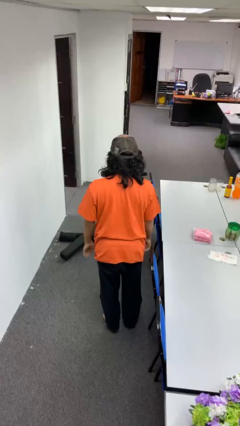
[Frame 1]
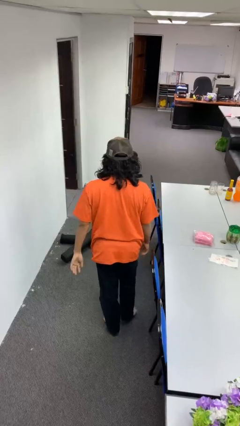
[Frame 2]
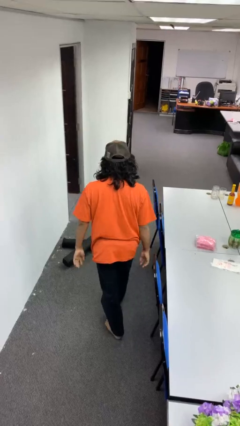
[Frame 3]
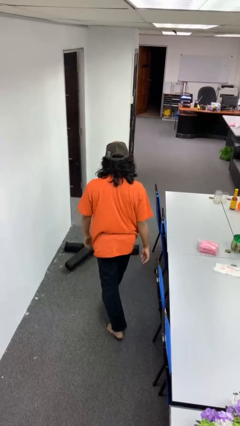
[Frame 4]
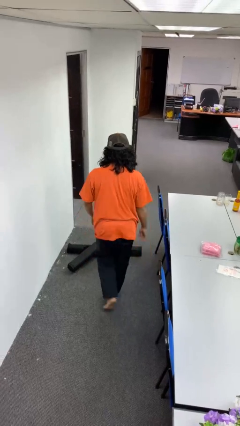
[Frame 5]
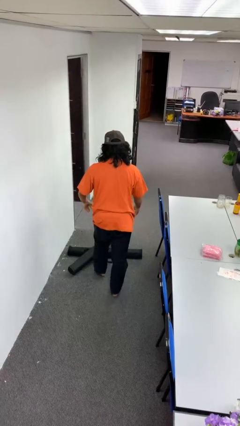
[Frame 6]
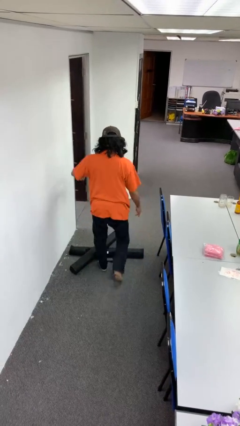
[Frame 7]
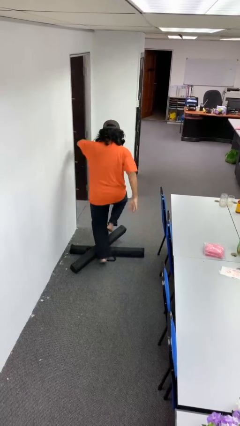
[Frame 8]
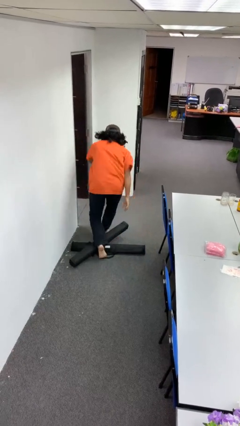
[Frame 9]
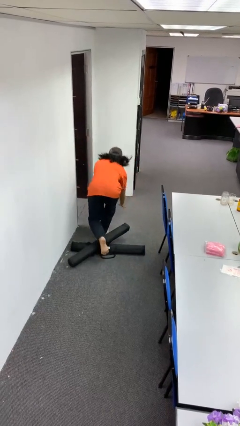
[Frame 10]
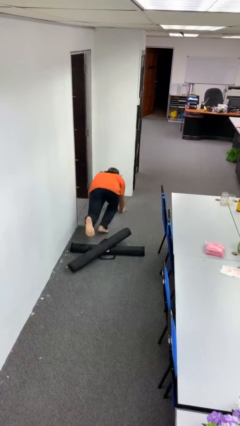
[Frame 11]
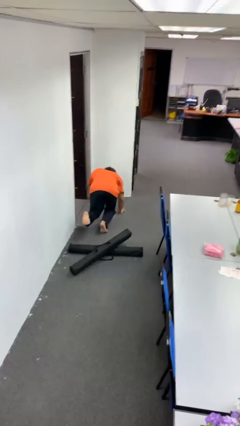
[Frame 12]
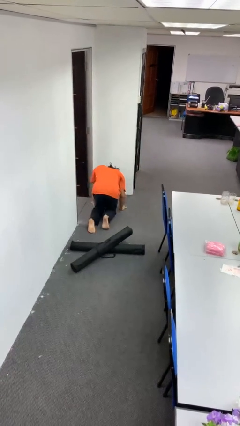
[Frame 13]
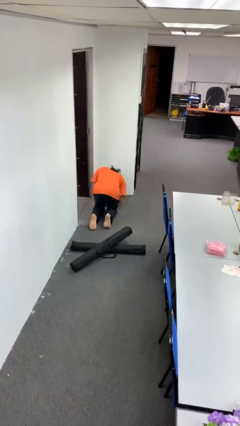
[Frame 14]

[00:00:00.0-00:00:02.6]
person trips on object on floor

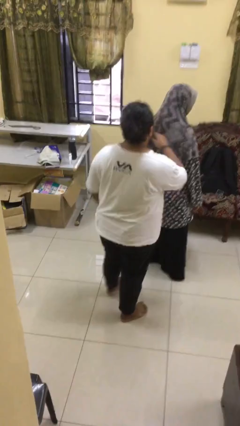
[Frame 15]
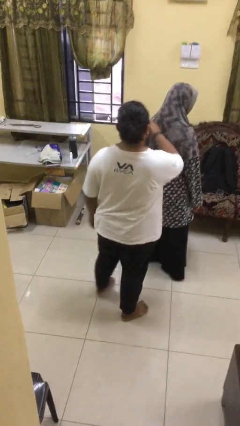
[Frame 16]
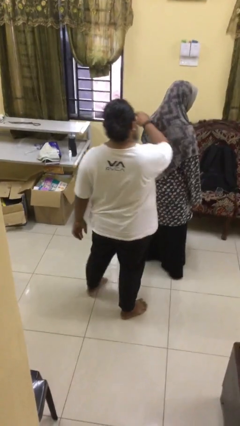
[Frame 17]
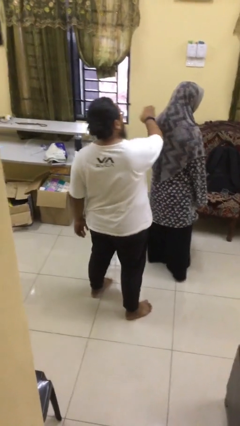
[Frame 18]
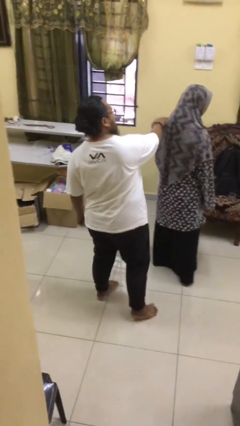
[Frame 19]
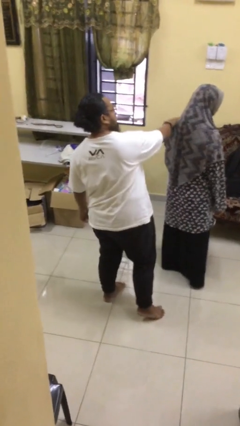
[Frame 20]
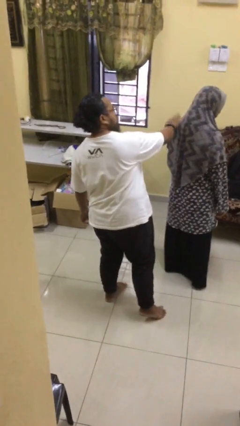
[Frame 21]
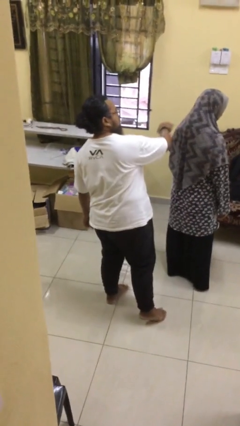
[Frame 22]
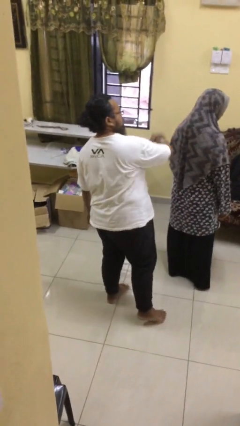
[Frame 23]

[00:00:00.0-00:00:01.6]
person touches back of person

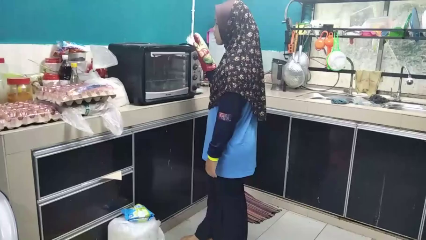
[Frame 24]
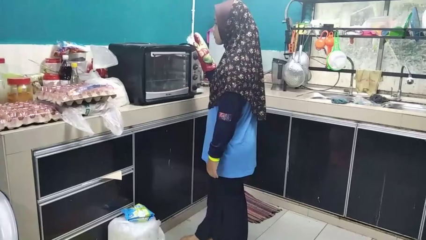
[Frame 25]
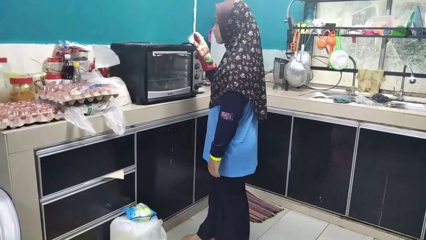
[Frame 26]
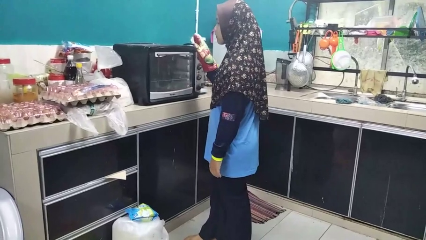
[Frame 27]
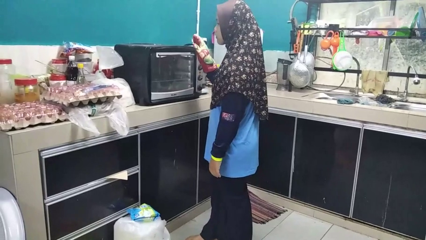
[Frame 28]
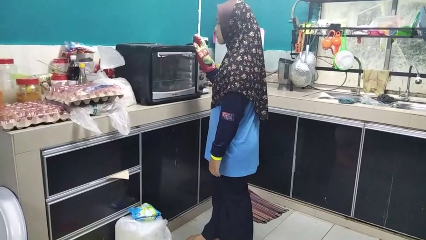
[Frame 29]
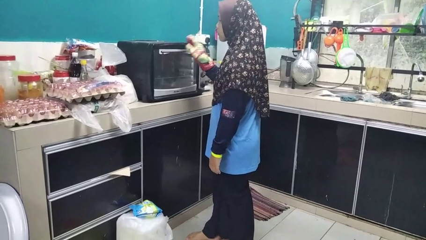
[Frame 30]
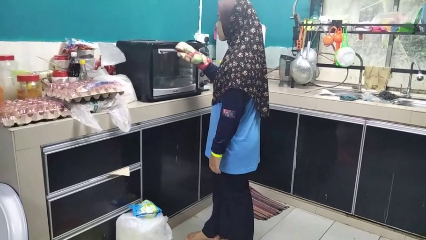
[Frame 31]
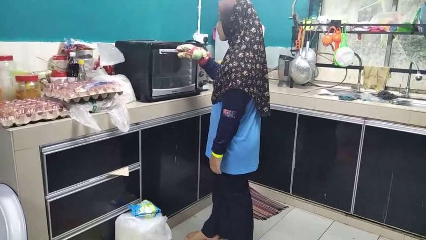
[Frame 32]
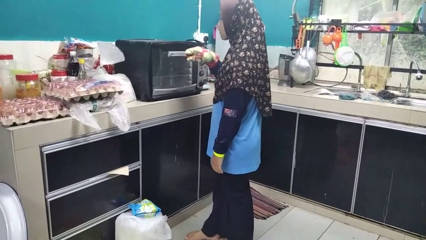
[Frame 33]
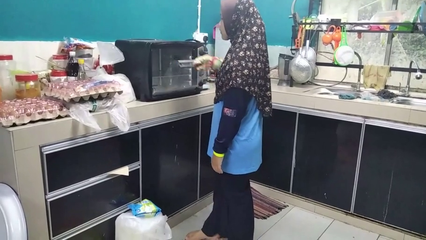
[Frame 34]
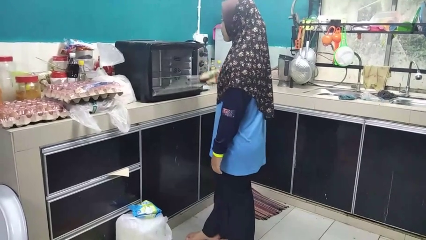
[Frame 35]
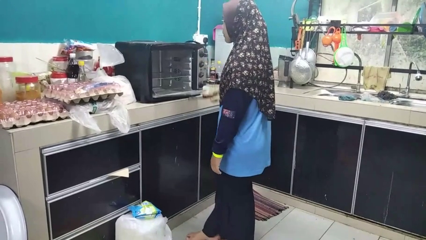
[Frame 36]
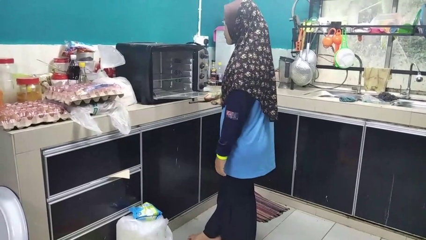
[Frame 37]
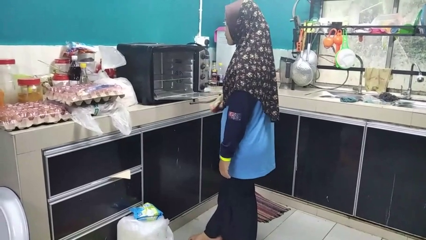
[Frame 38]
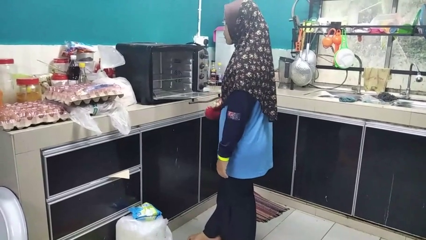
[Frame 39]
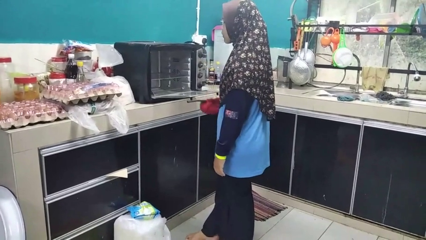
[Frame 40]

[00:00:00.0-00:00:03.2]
person opens oven door

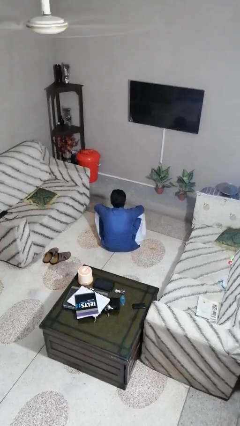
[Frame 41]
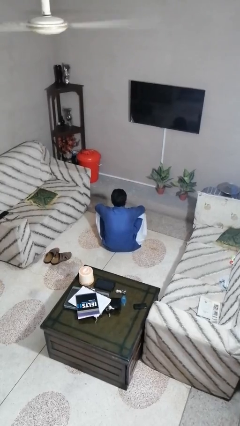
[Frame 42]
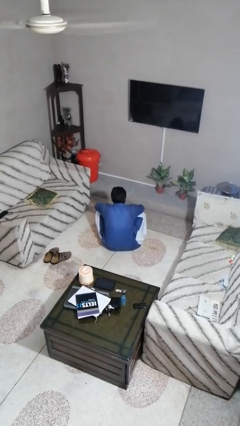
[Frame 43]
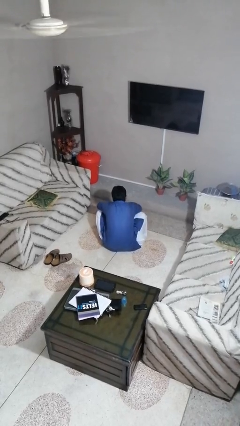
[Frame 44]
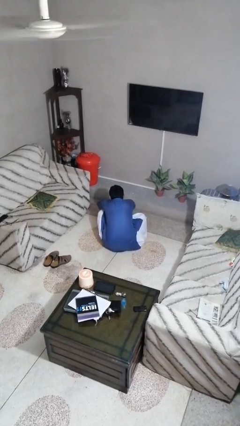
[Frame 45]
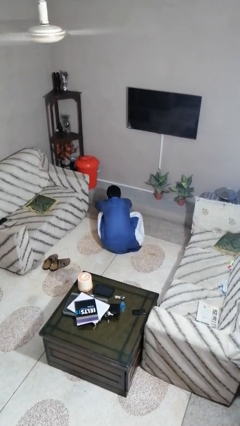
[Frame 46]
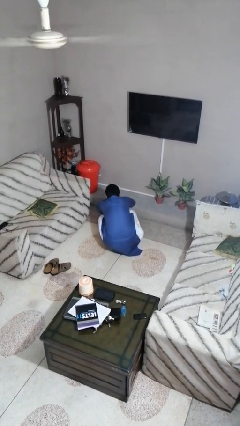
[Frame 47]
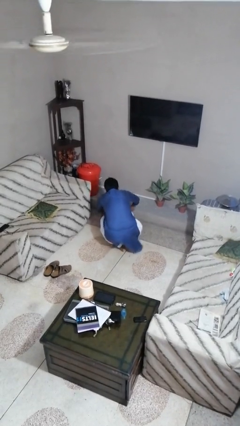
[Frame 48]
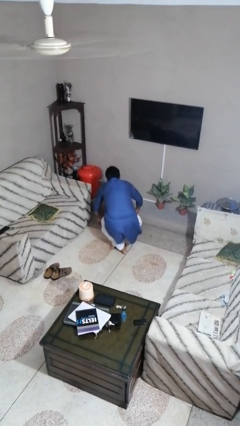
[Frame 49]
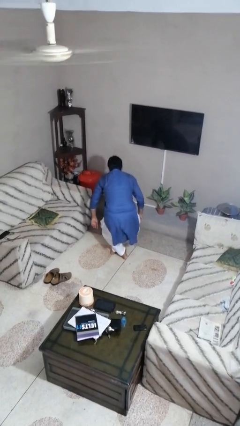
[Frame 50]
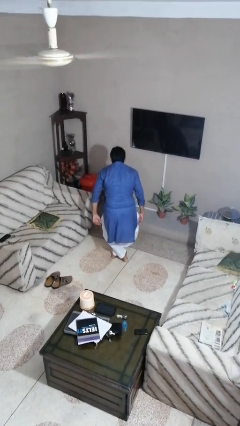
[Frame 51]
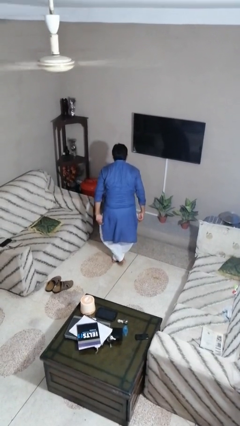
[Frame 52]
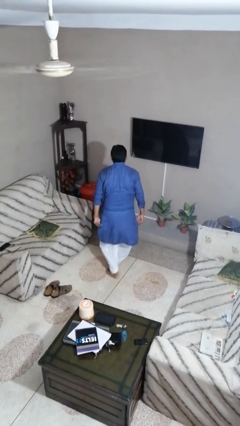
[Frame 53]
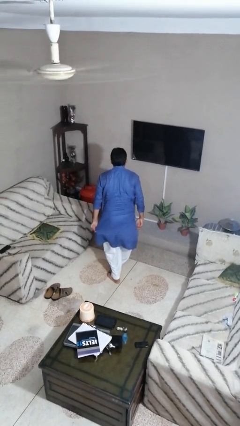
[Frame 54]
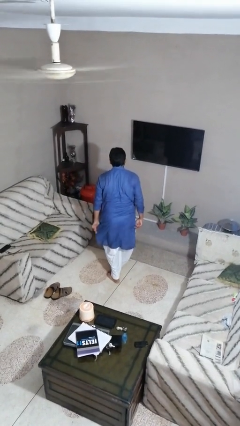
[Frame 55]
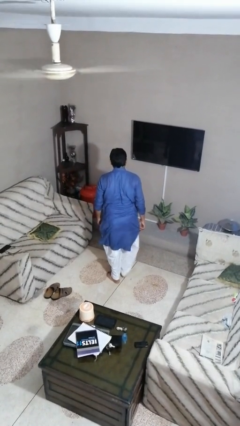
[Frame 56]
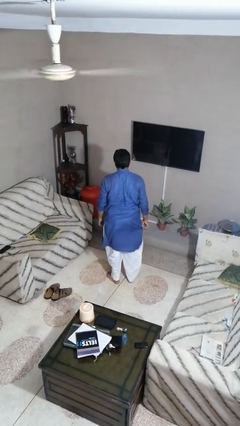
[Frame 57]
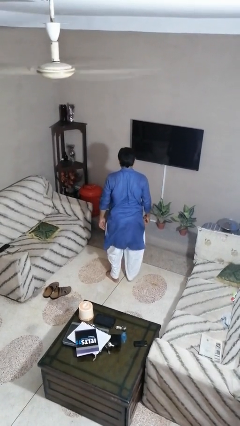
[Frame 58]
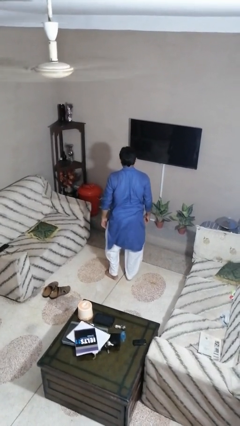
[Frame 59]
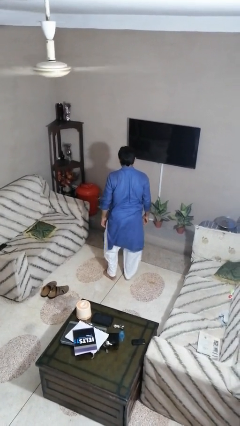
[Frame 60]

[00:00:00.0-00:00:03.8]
person stands up from floor

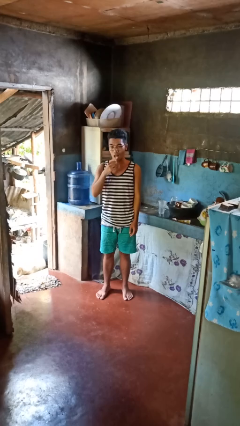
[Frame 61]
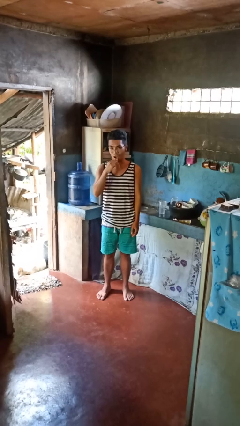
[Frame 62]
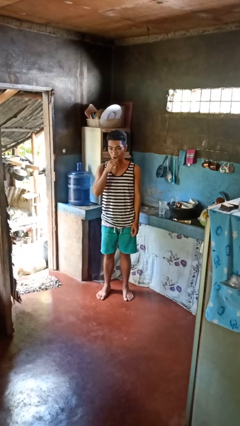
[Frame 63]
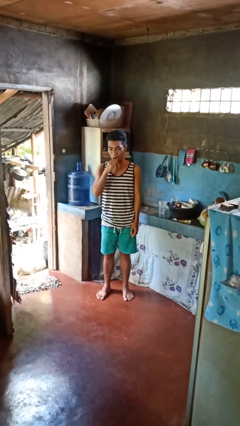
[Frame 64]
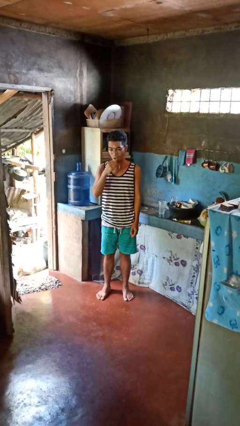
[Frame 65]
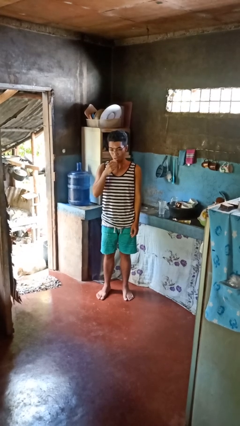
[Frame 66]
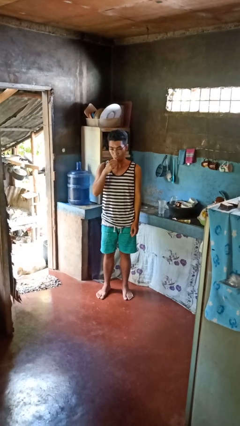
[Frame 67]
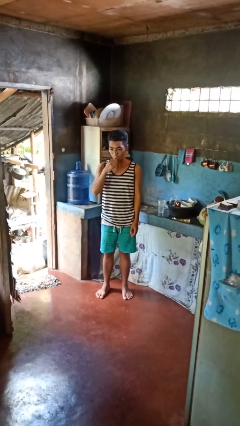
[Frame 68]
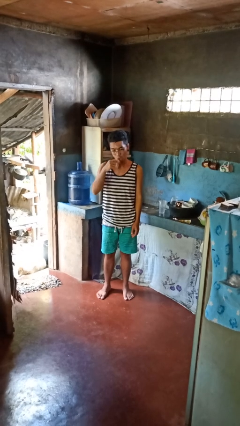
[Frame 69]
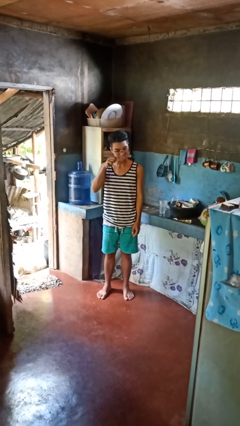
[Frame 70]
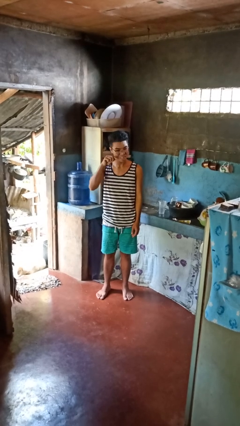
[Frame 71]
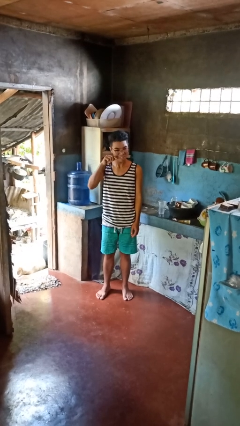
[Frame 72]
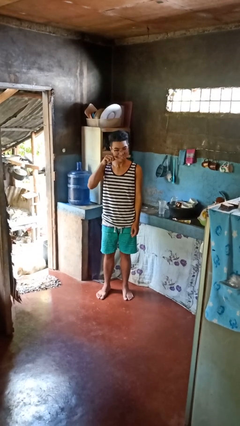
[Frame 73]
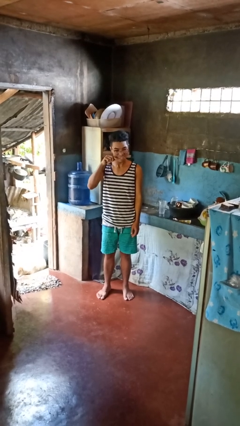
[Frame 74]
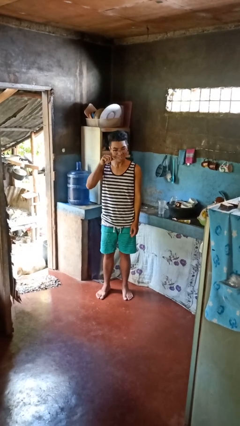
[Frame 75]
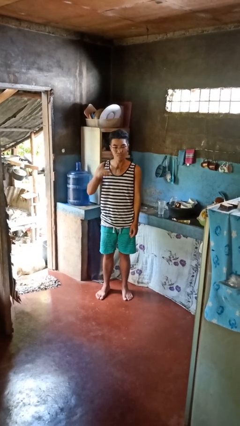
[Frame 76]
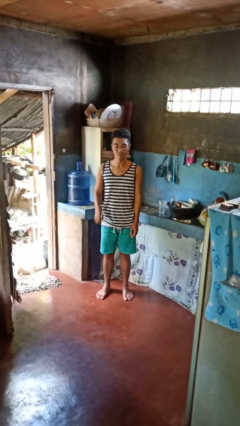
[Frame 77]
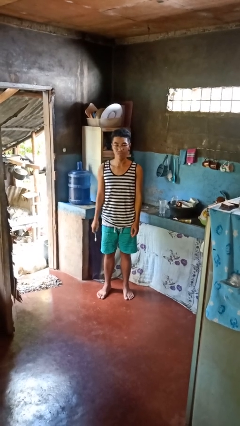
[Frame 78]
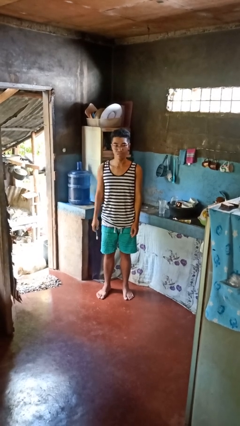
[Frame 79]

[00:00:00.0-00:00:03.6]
person brushes teeth

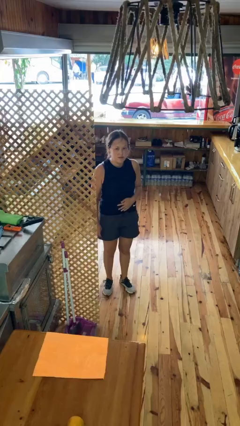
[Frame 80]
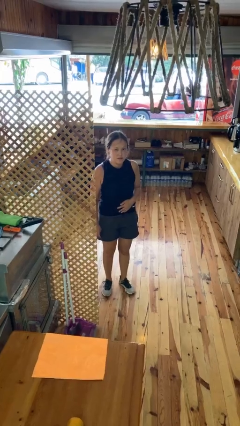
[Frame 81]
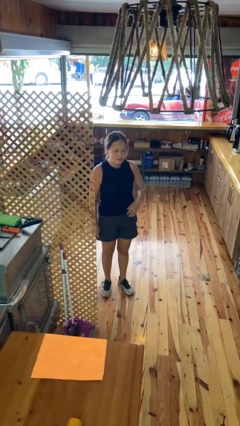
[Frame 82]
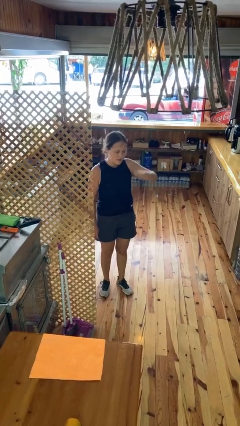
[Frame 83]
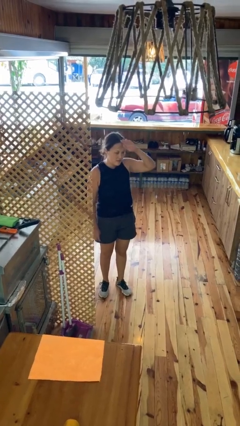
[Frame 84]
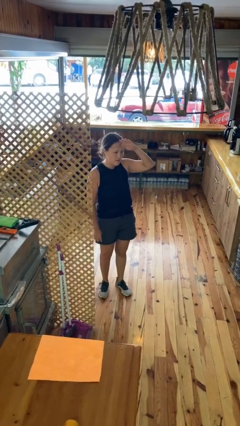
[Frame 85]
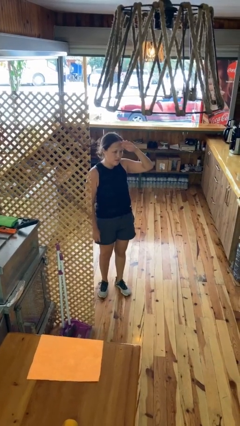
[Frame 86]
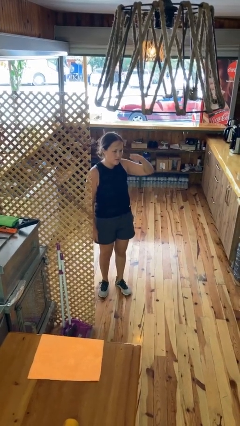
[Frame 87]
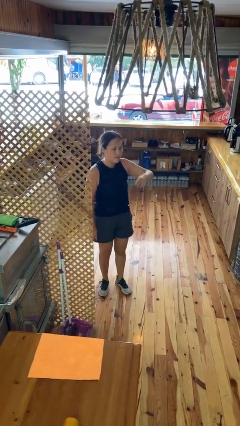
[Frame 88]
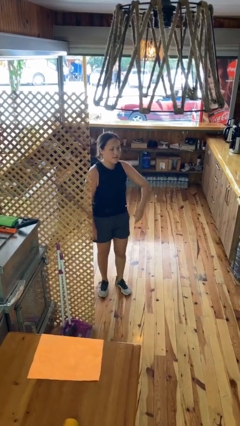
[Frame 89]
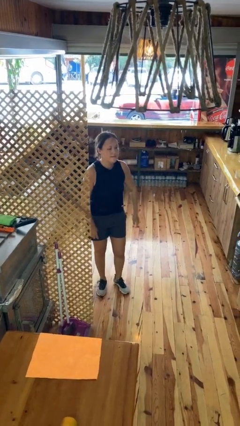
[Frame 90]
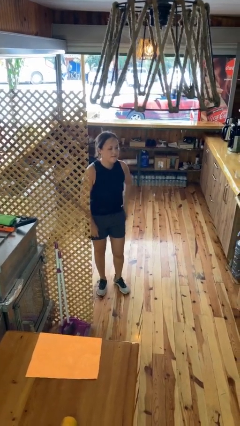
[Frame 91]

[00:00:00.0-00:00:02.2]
person salutes
